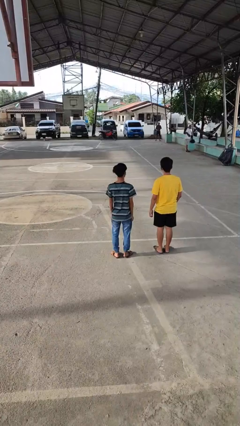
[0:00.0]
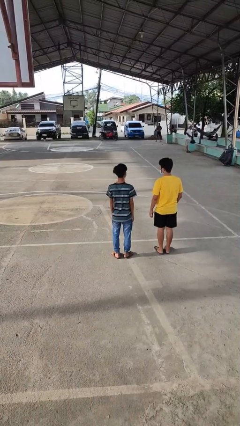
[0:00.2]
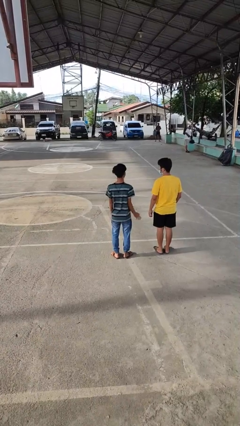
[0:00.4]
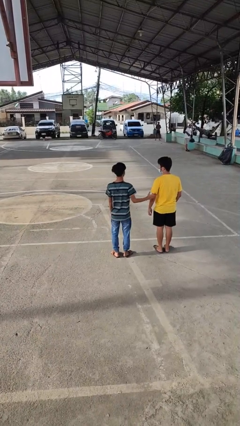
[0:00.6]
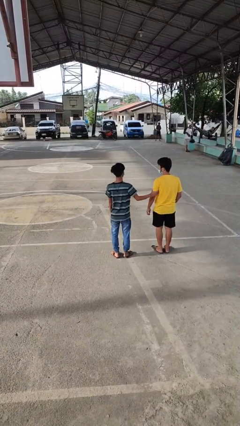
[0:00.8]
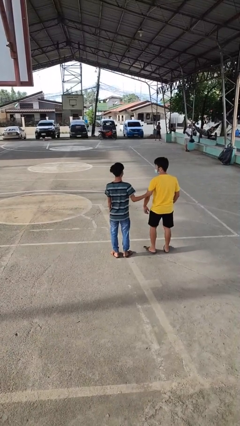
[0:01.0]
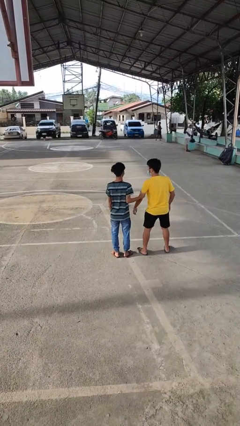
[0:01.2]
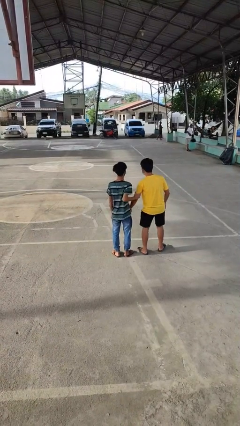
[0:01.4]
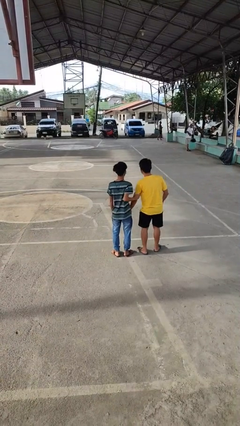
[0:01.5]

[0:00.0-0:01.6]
person grabs person by bicep

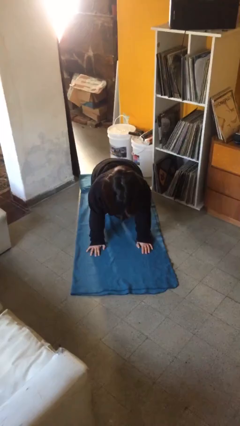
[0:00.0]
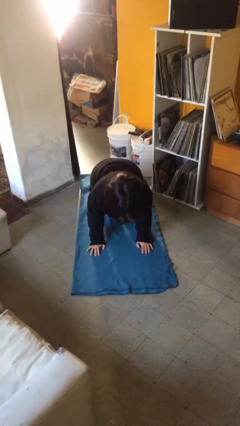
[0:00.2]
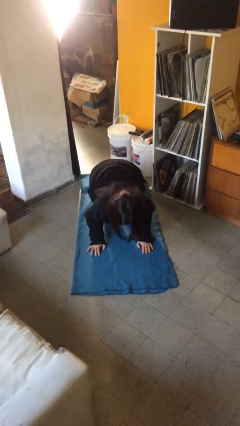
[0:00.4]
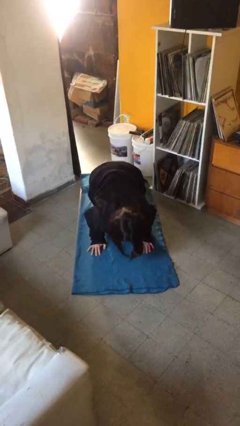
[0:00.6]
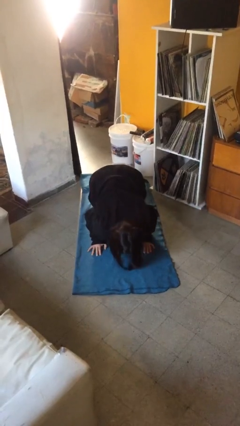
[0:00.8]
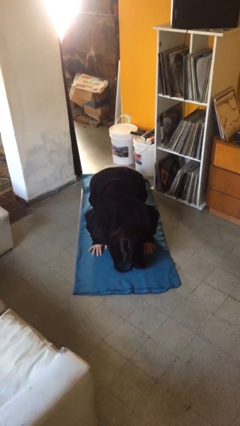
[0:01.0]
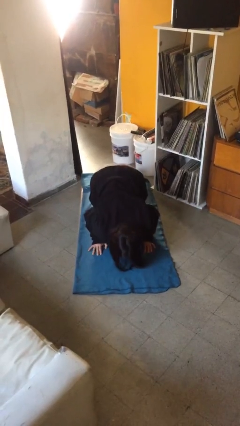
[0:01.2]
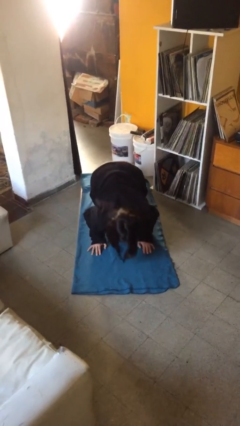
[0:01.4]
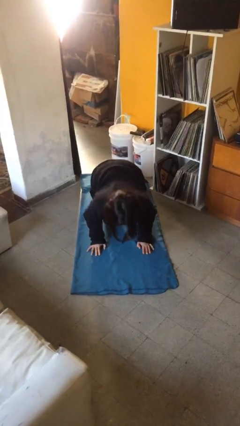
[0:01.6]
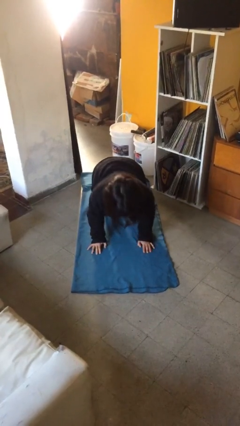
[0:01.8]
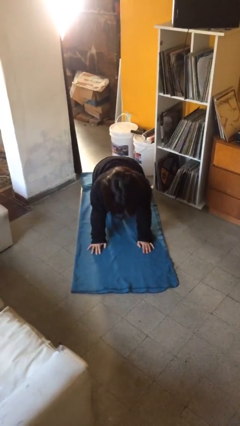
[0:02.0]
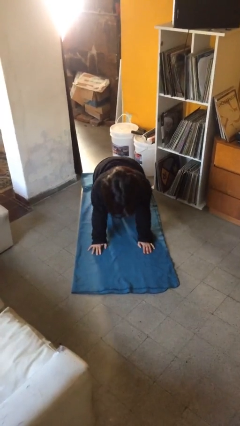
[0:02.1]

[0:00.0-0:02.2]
person exercises with pushup

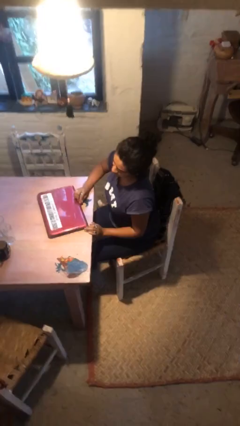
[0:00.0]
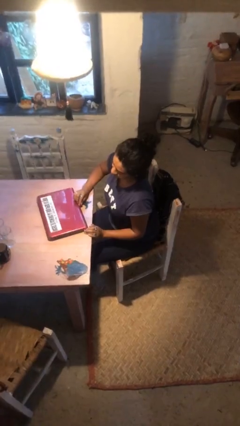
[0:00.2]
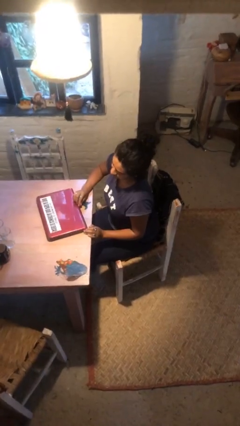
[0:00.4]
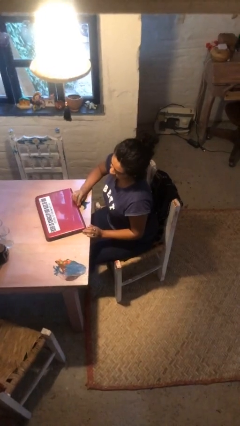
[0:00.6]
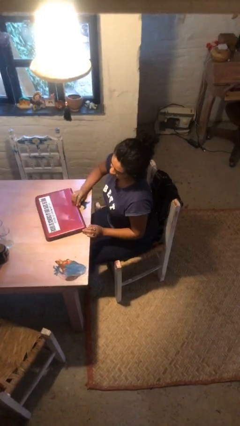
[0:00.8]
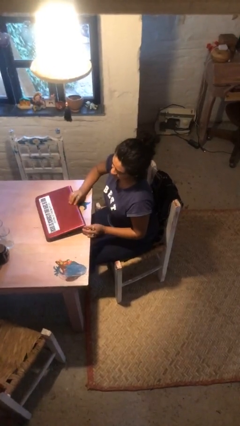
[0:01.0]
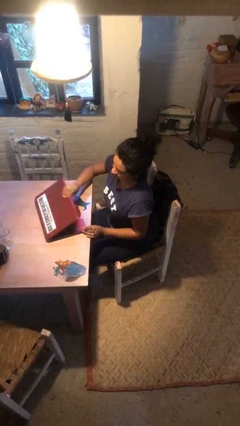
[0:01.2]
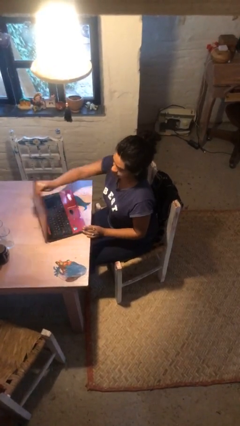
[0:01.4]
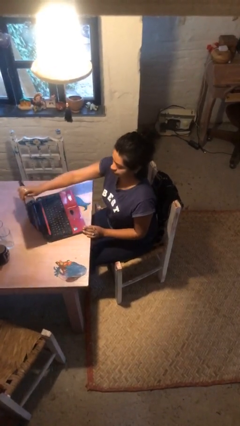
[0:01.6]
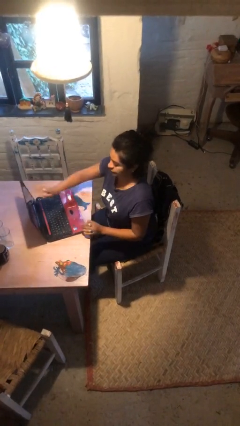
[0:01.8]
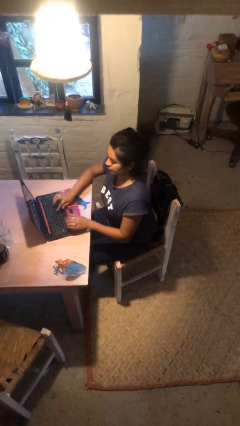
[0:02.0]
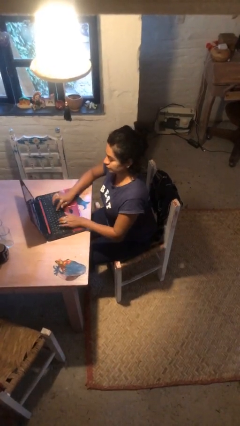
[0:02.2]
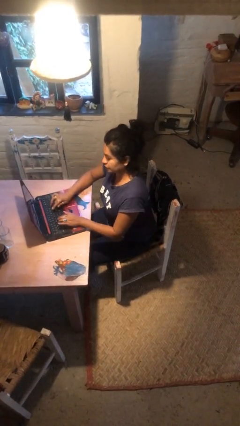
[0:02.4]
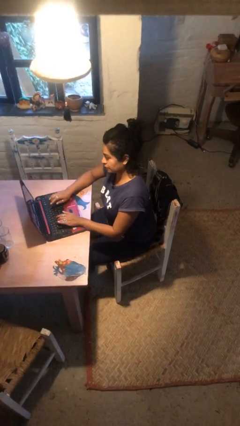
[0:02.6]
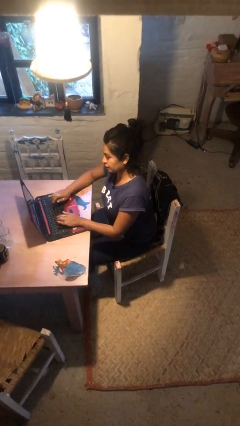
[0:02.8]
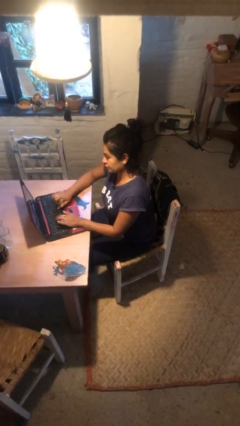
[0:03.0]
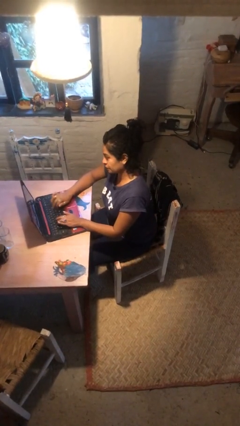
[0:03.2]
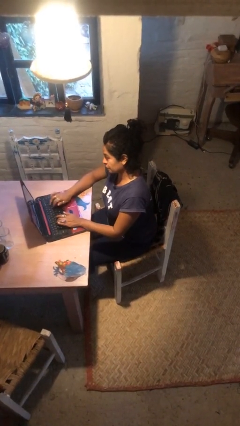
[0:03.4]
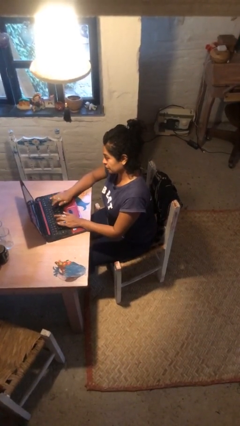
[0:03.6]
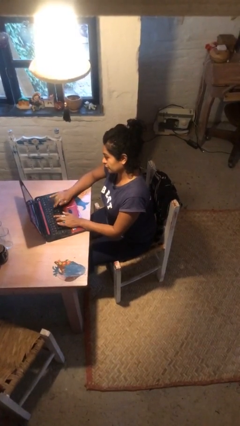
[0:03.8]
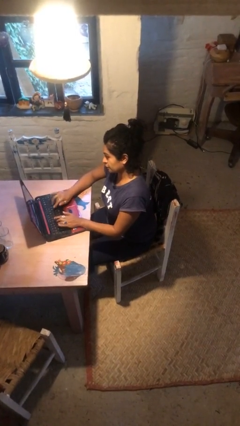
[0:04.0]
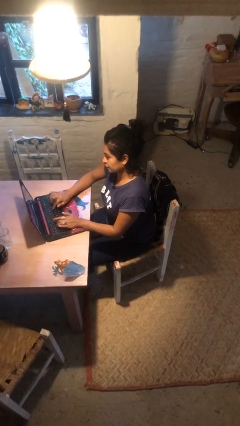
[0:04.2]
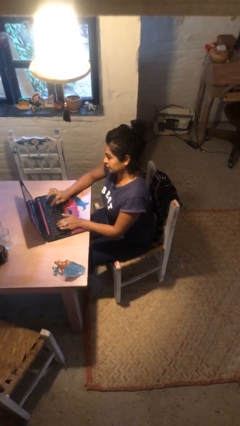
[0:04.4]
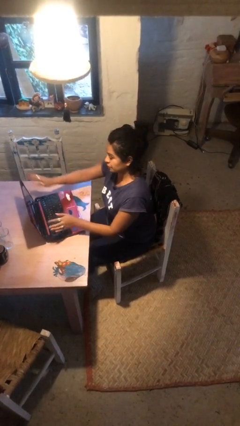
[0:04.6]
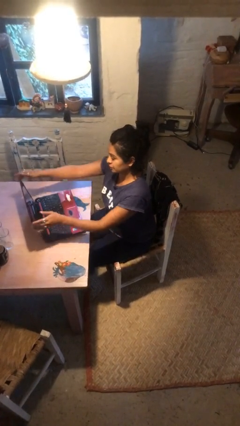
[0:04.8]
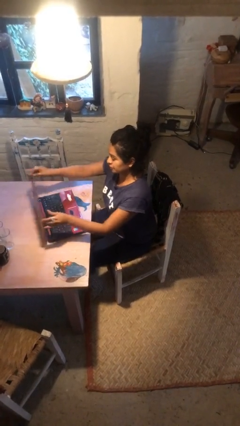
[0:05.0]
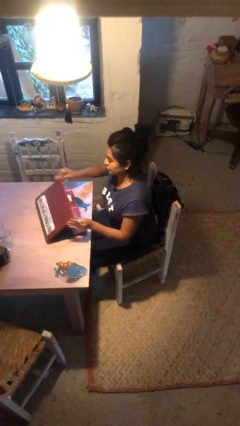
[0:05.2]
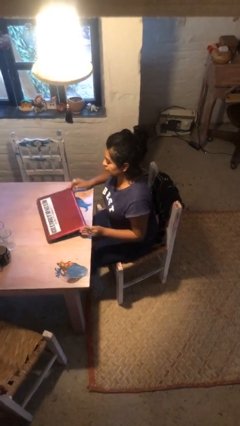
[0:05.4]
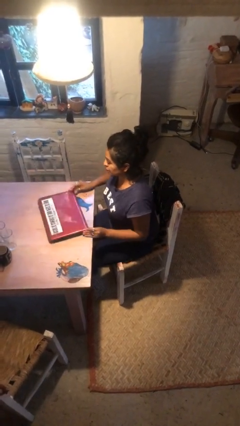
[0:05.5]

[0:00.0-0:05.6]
person interacts with laptop

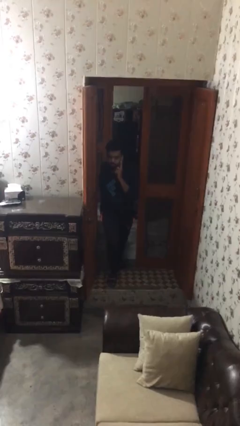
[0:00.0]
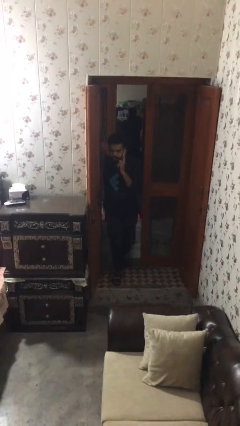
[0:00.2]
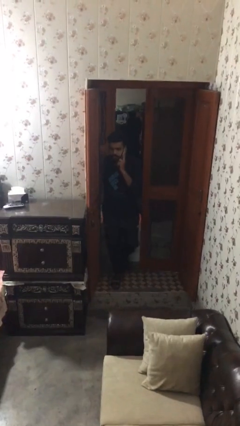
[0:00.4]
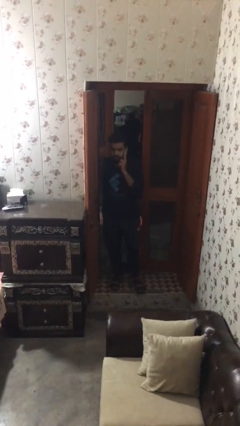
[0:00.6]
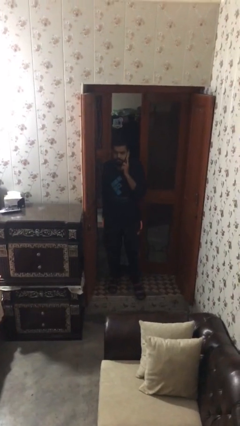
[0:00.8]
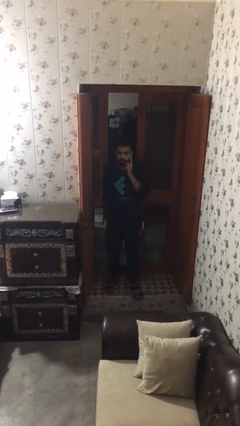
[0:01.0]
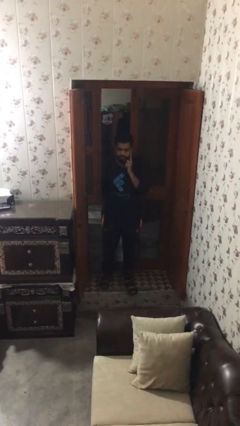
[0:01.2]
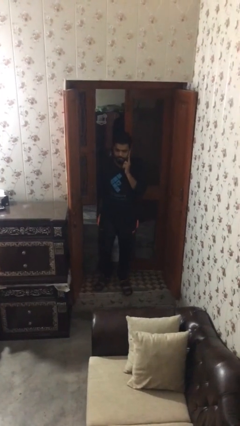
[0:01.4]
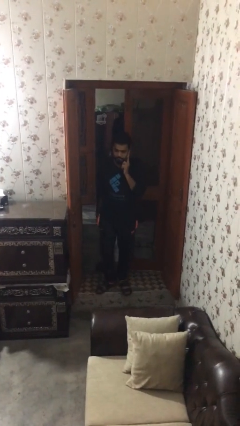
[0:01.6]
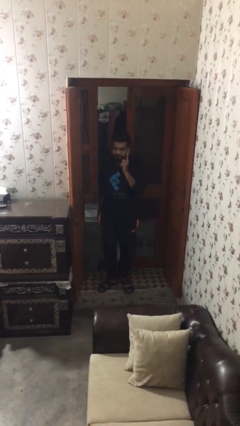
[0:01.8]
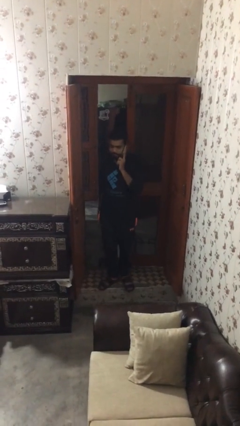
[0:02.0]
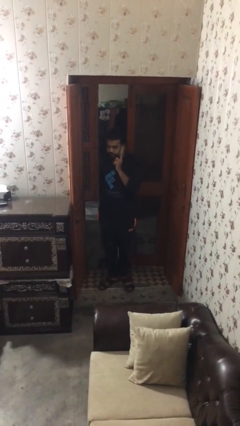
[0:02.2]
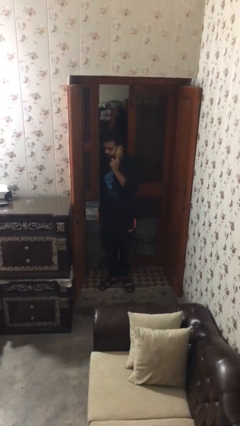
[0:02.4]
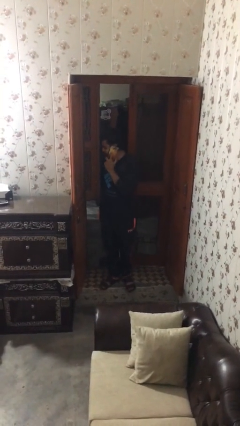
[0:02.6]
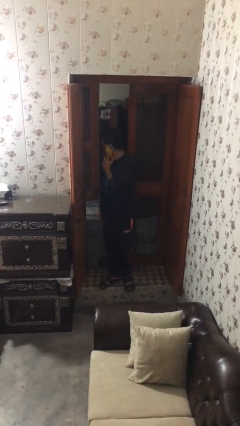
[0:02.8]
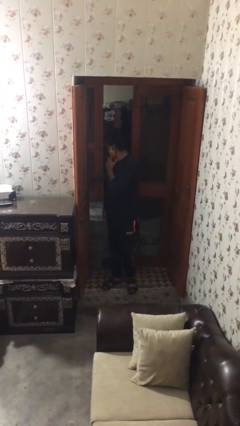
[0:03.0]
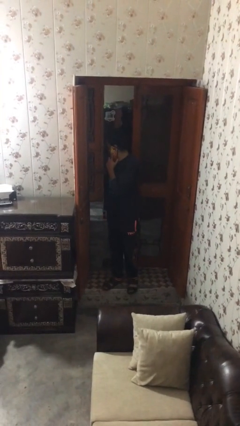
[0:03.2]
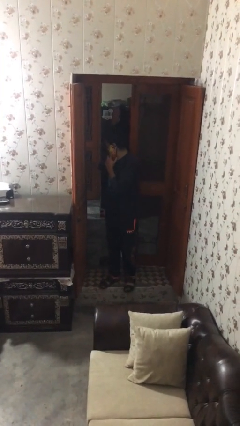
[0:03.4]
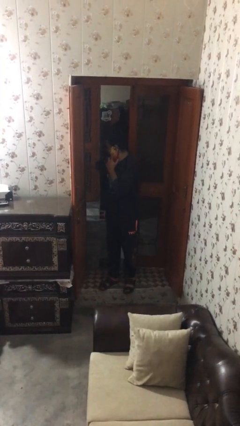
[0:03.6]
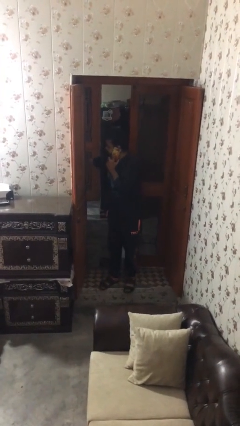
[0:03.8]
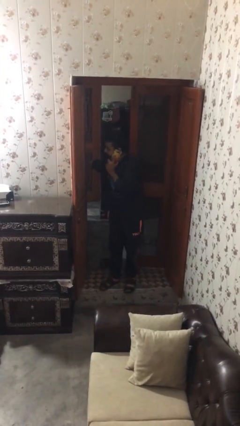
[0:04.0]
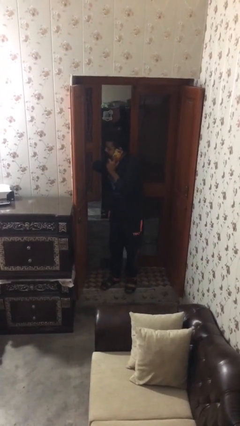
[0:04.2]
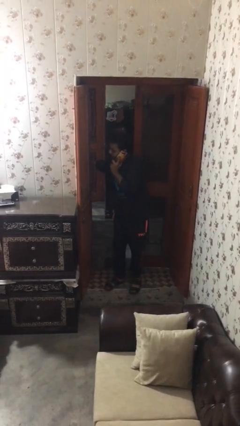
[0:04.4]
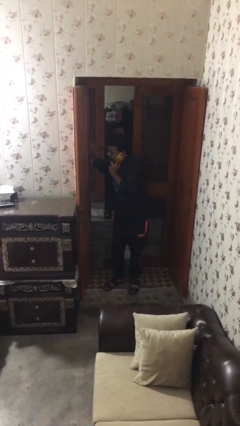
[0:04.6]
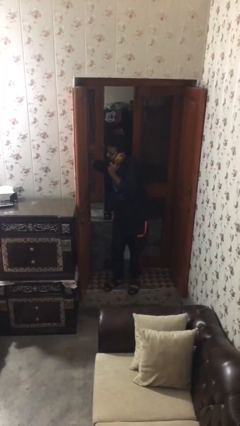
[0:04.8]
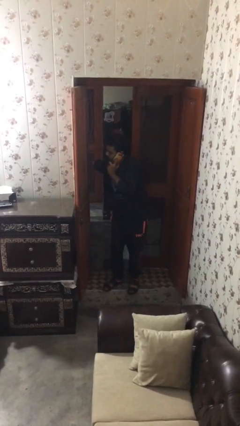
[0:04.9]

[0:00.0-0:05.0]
person enters scene through structure

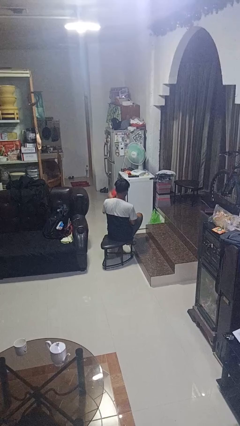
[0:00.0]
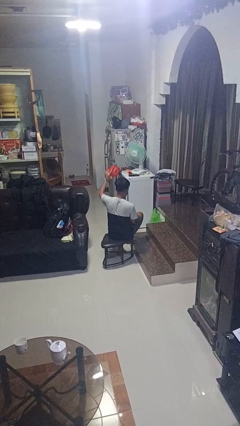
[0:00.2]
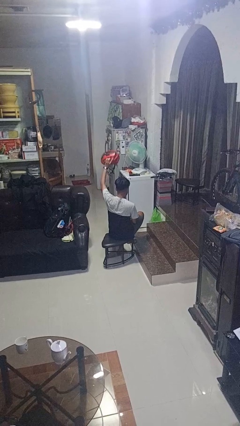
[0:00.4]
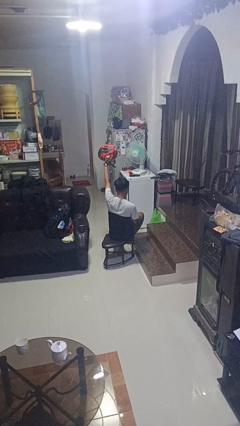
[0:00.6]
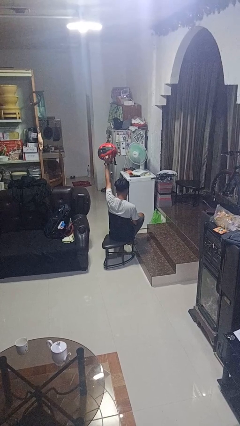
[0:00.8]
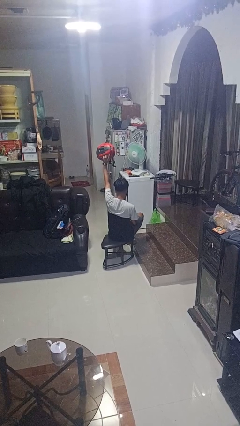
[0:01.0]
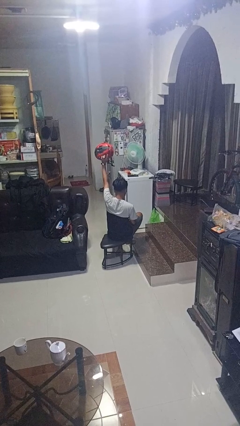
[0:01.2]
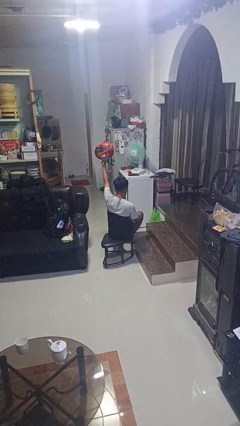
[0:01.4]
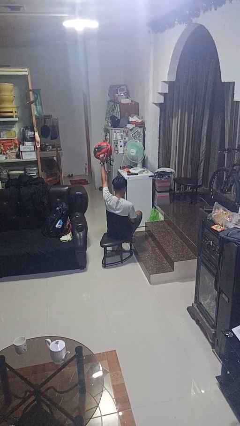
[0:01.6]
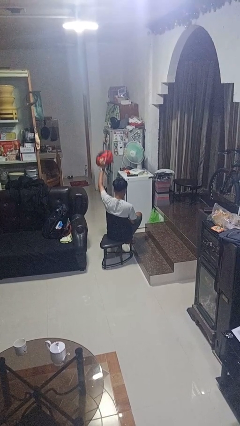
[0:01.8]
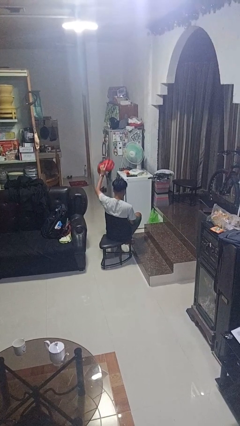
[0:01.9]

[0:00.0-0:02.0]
person holds object above head

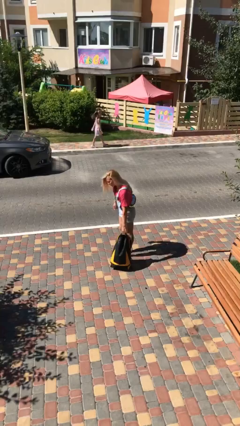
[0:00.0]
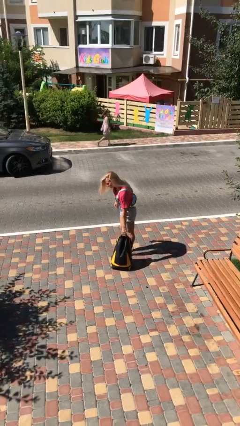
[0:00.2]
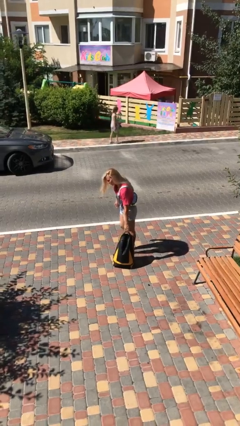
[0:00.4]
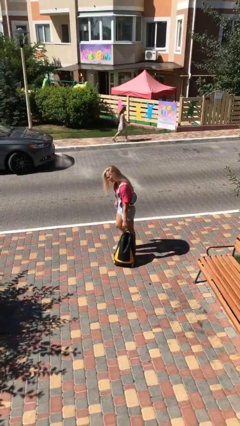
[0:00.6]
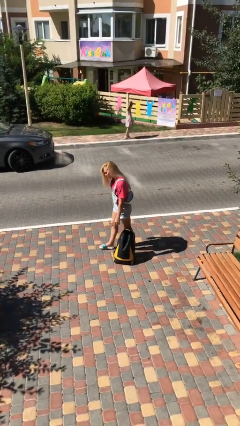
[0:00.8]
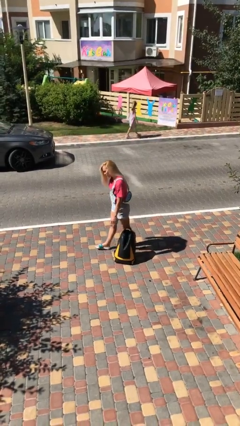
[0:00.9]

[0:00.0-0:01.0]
person puts down object on floor
